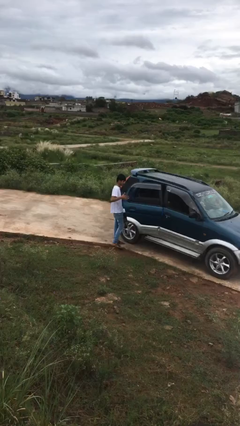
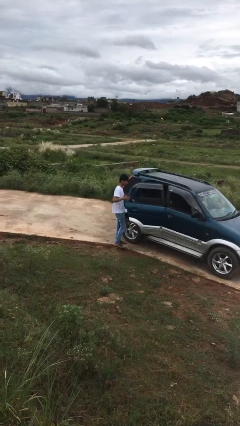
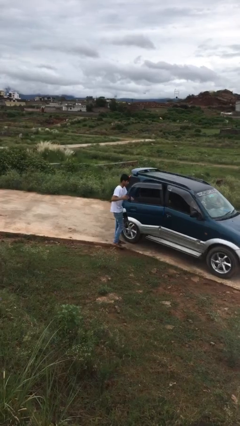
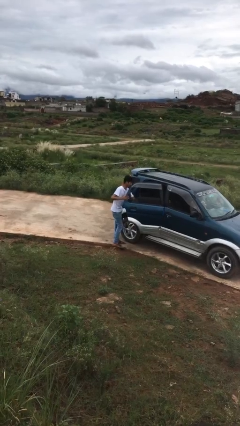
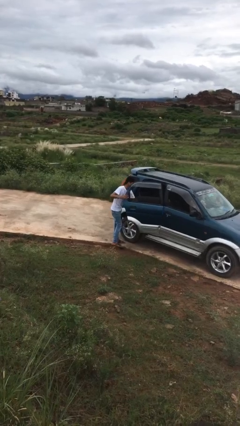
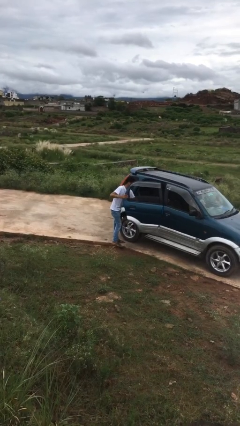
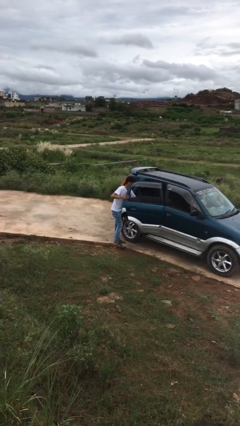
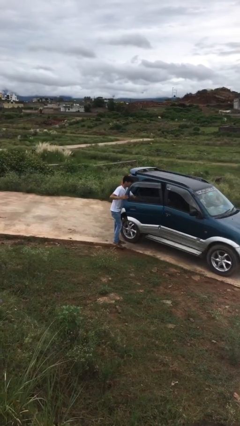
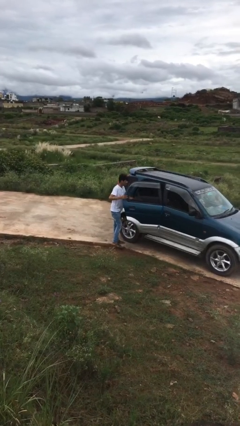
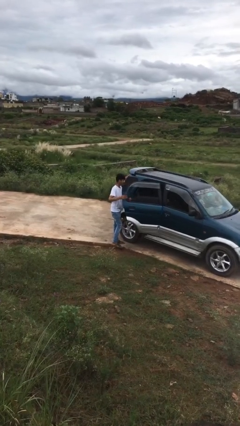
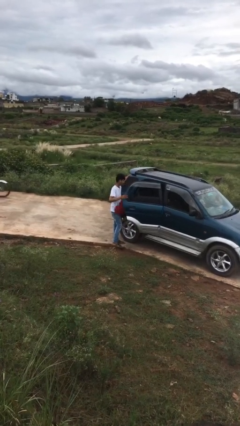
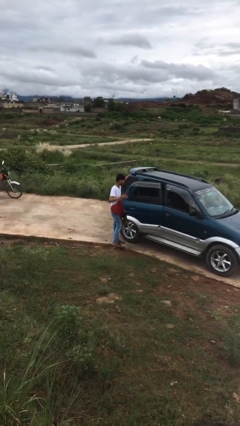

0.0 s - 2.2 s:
person unloads car

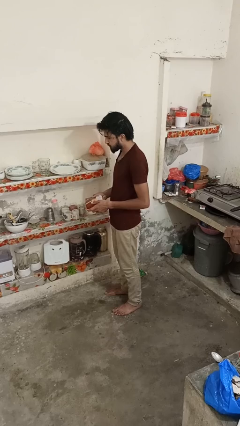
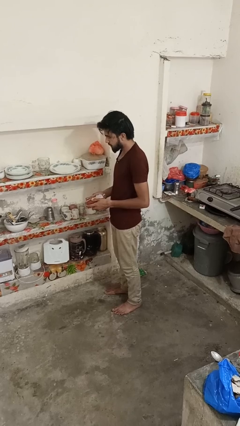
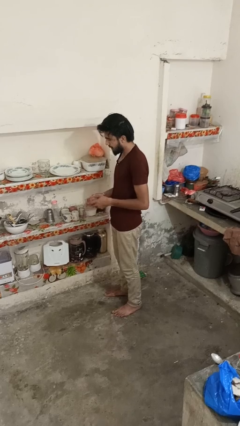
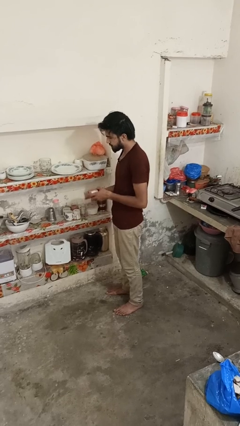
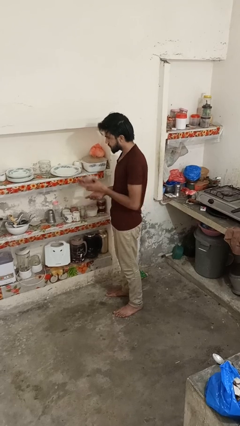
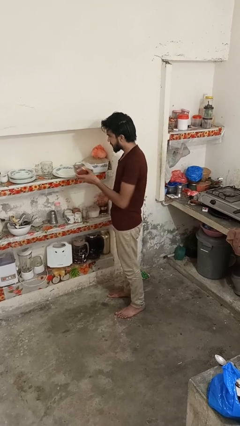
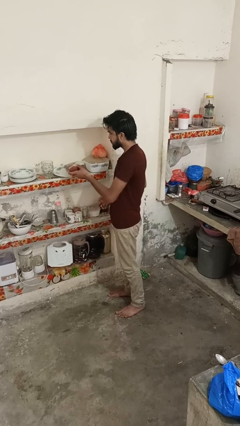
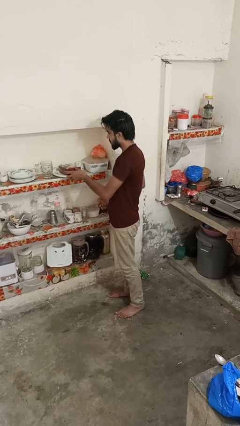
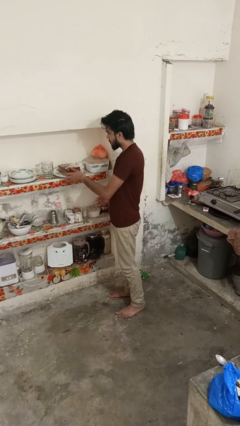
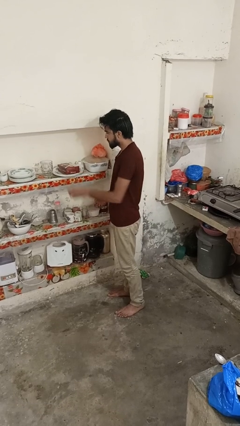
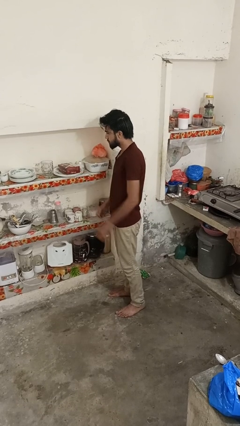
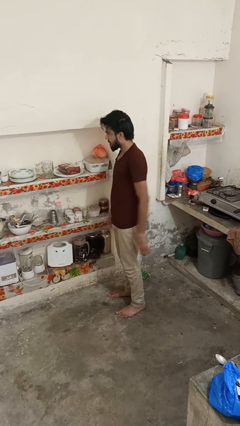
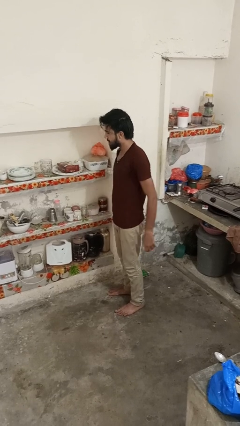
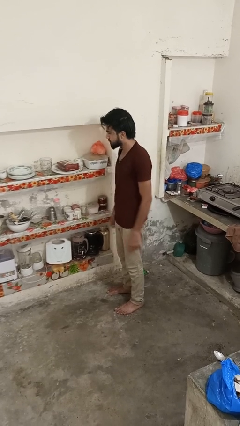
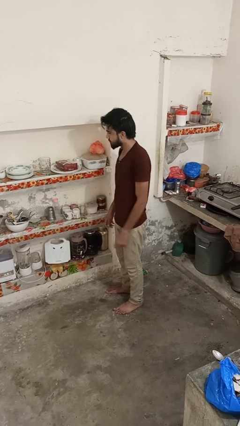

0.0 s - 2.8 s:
person puts down object into cabinet

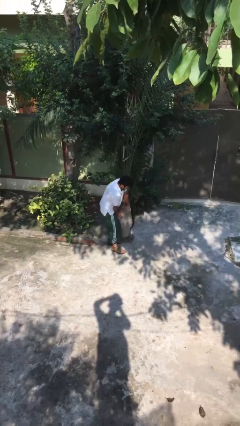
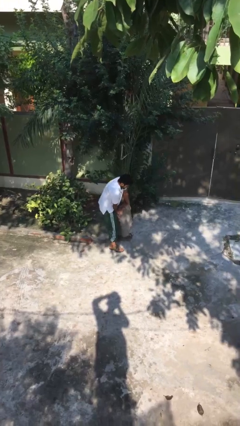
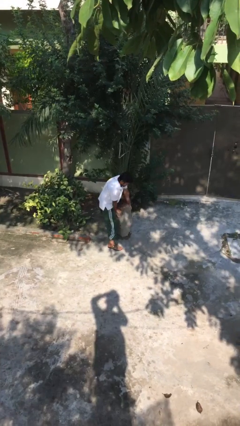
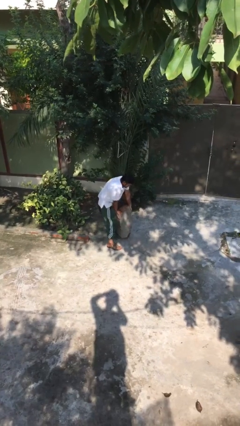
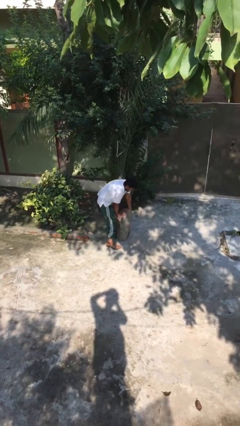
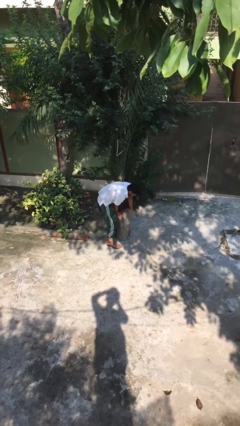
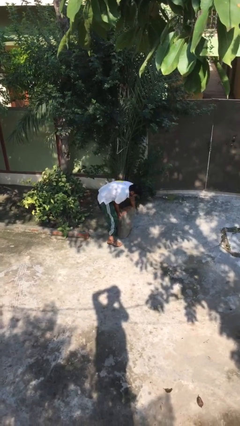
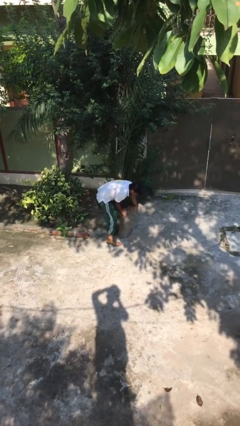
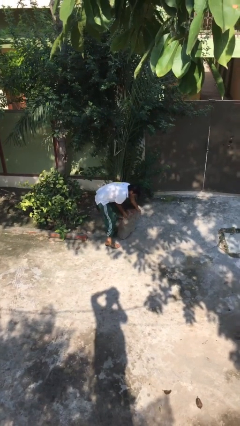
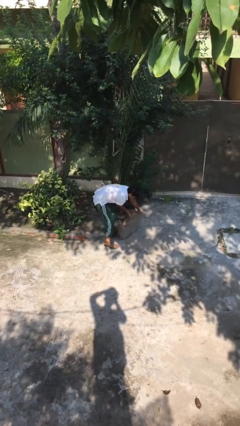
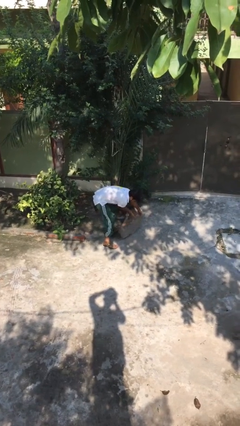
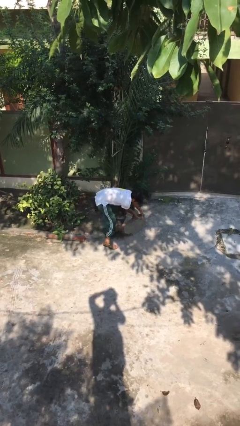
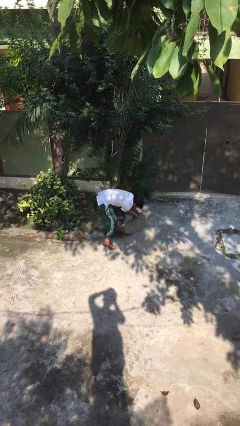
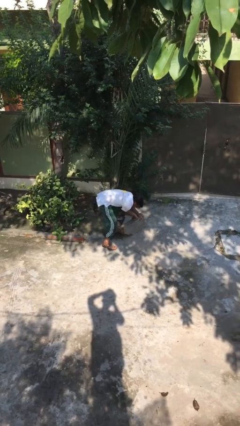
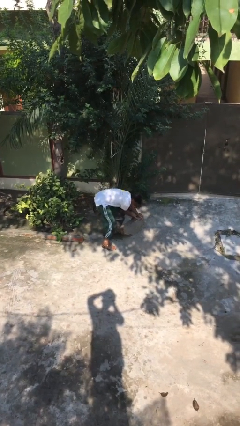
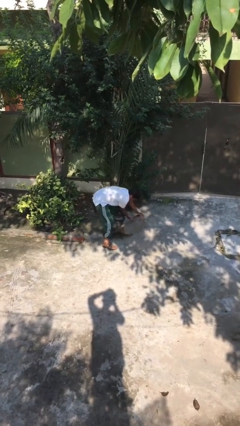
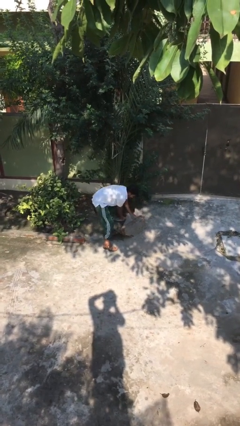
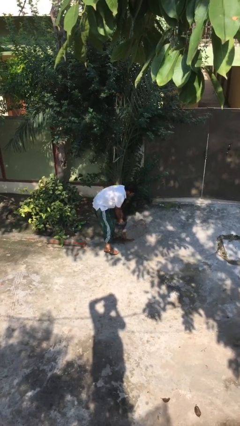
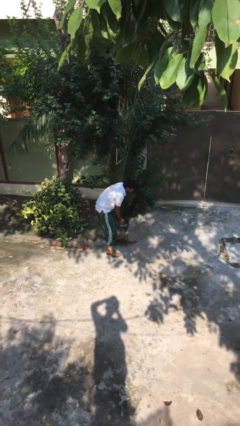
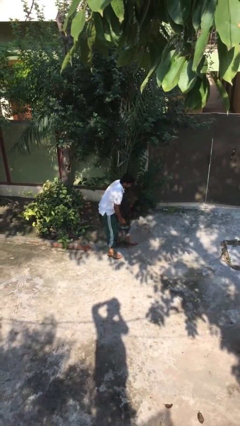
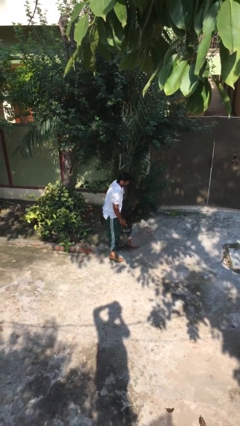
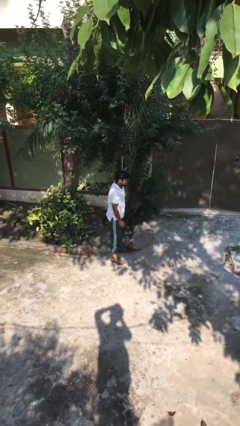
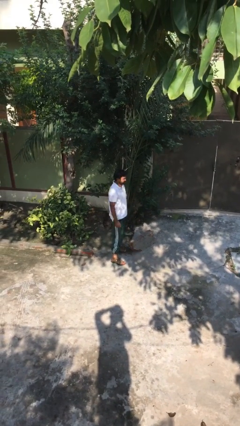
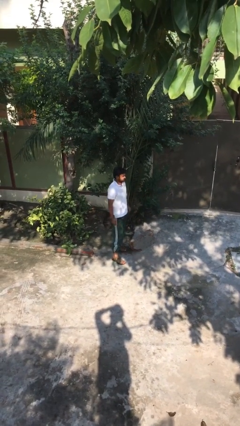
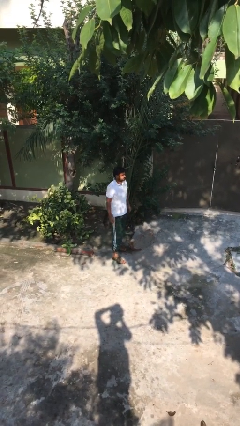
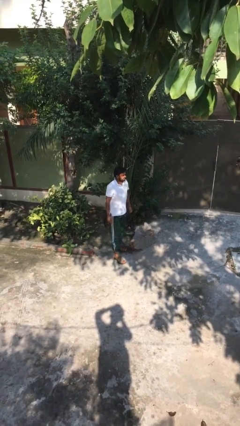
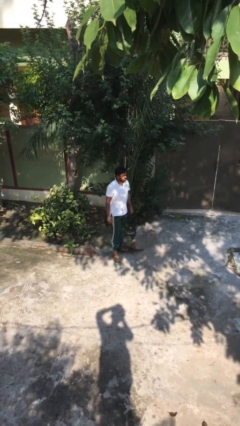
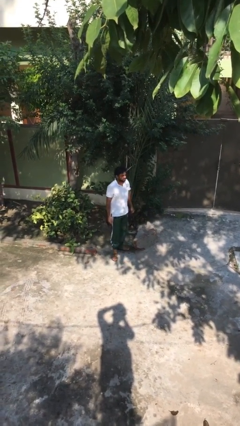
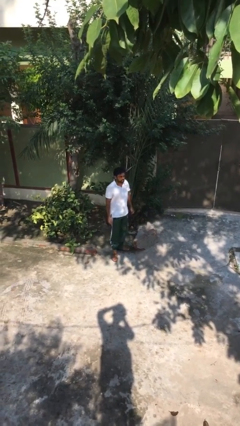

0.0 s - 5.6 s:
person puts down object on floor

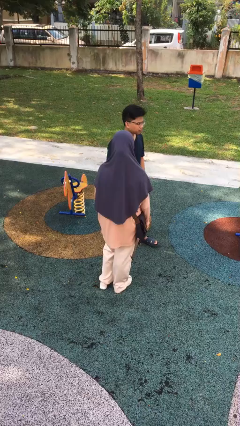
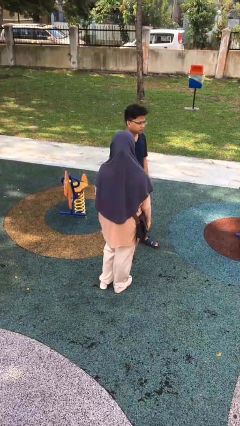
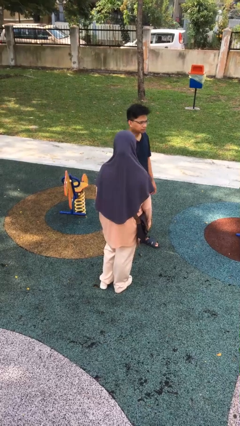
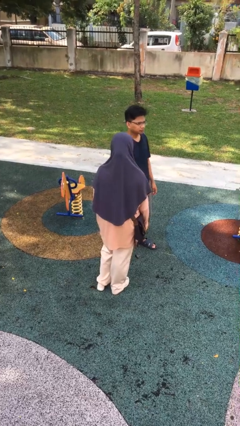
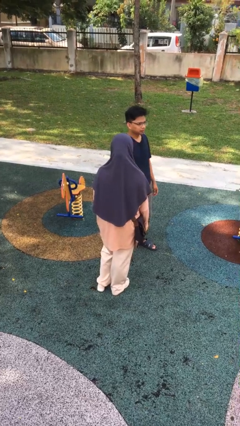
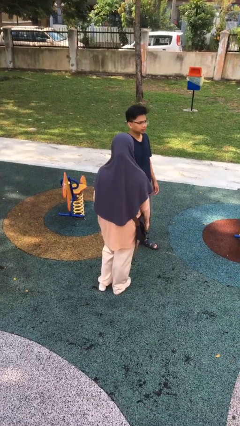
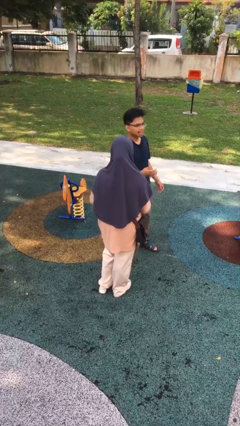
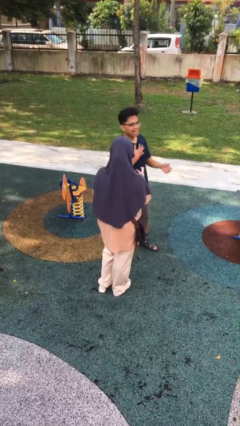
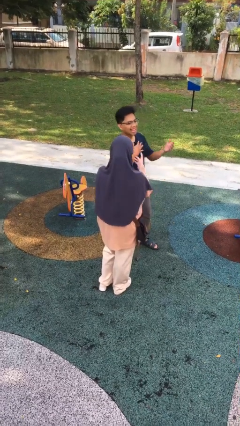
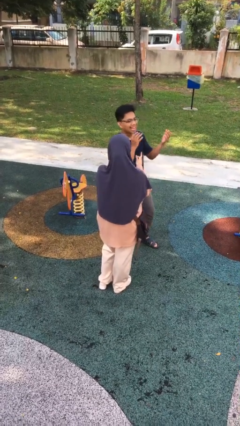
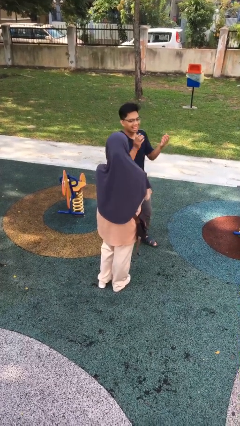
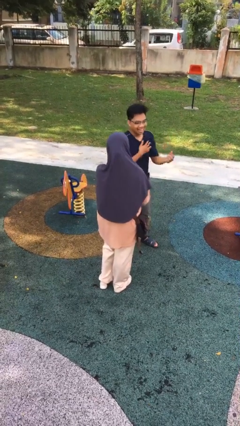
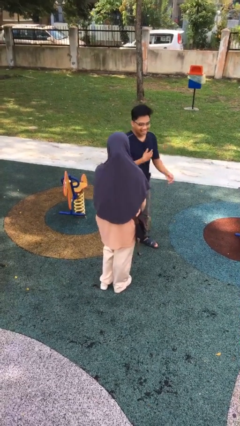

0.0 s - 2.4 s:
person laughs with person

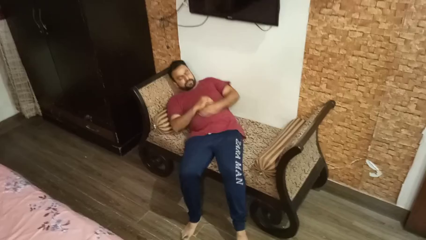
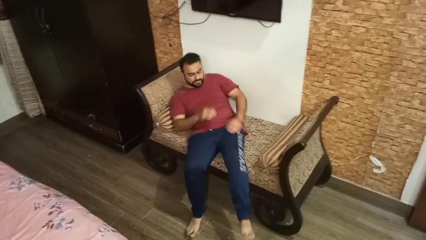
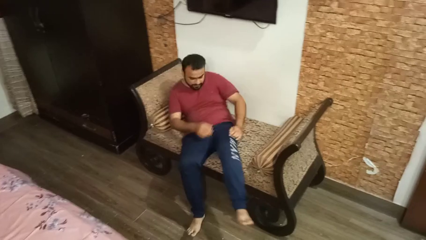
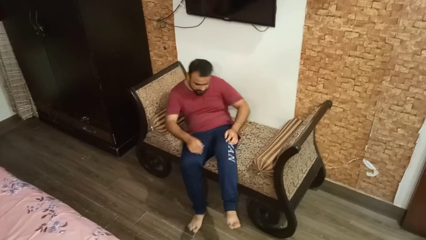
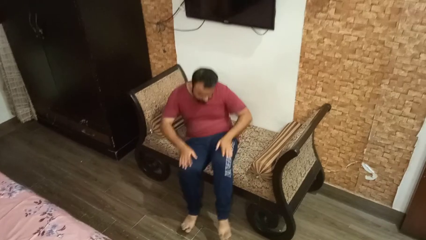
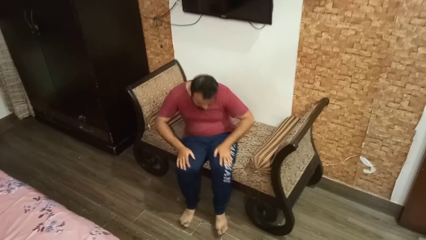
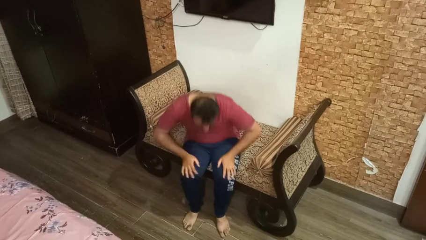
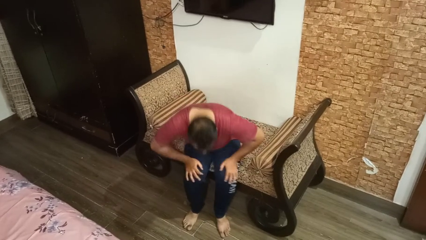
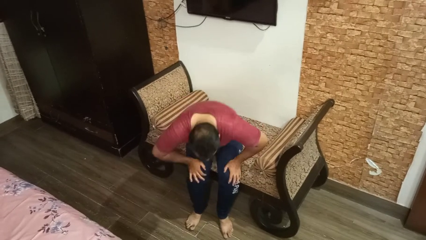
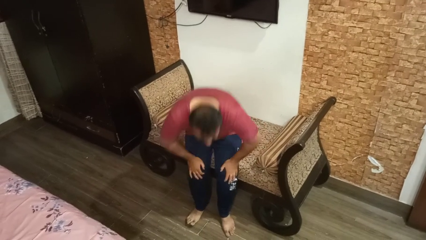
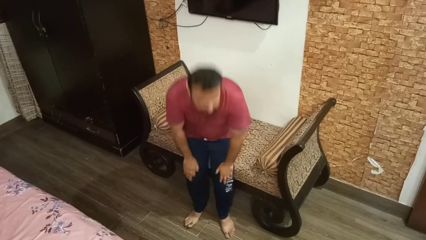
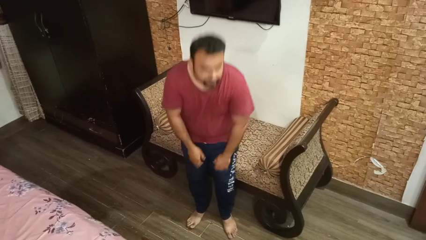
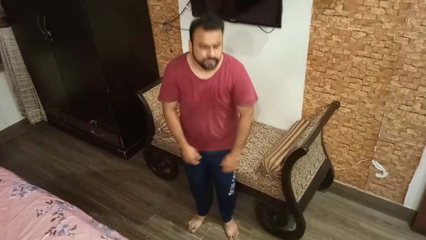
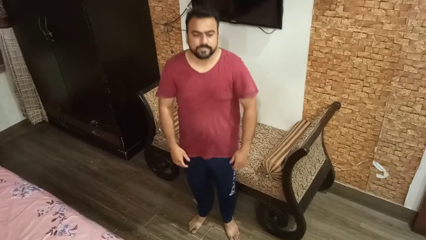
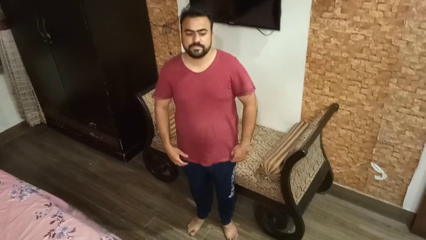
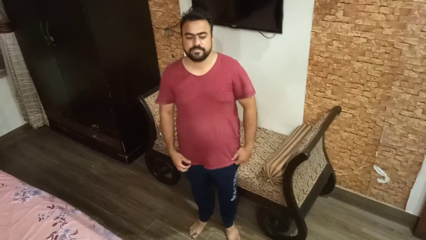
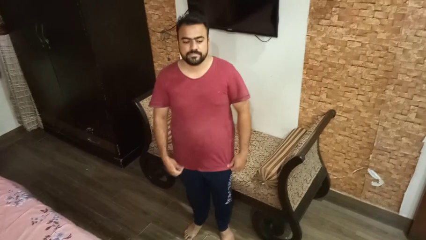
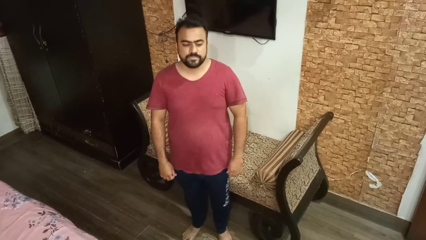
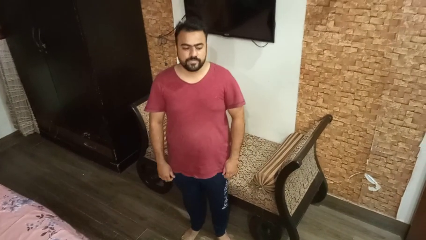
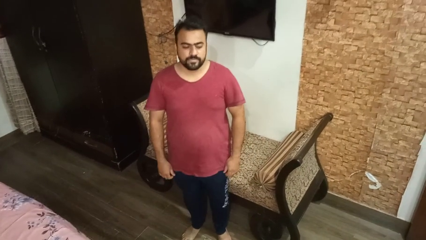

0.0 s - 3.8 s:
person stands up
